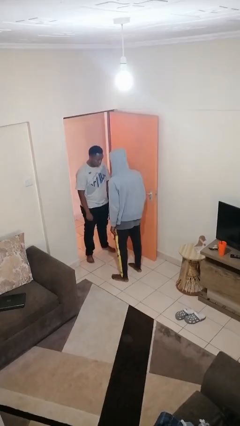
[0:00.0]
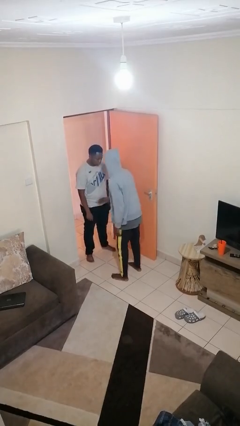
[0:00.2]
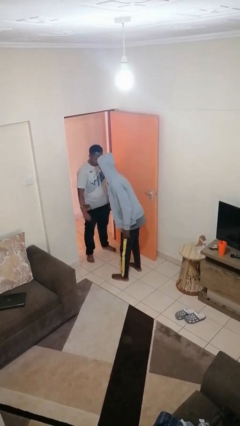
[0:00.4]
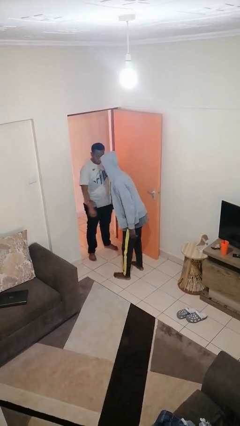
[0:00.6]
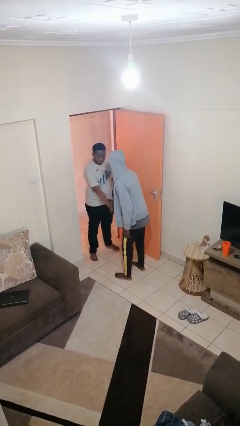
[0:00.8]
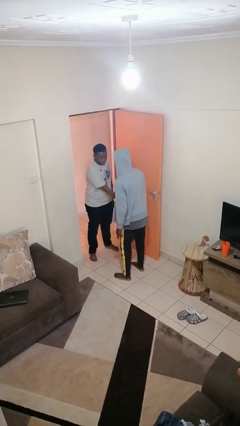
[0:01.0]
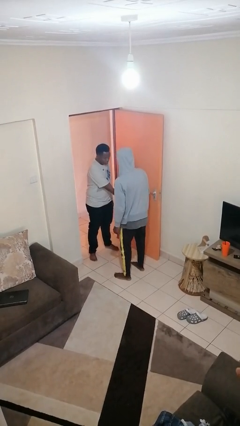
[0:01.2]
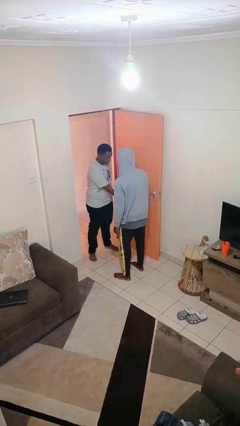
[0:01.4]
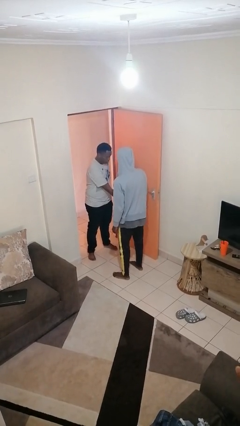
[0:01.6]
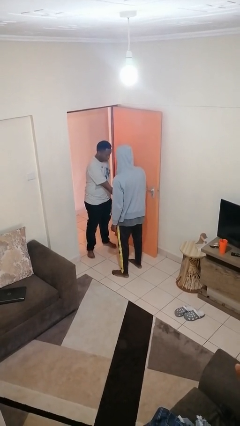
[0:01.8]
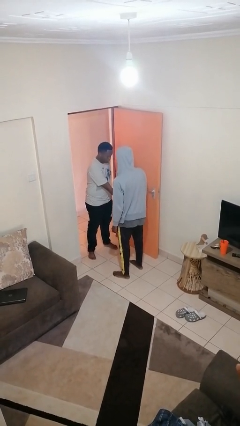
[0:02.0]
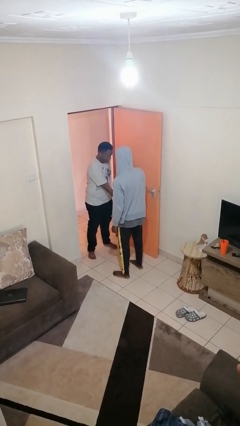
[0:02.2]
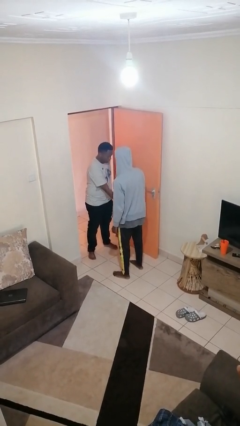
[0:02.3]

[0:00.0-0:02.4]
person grabs person by forearm

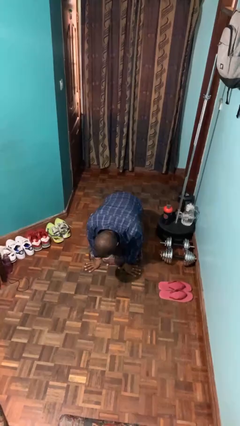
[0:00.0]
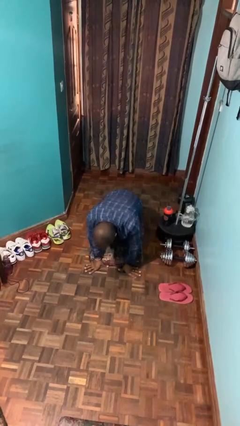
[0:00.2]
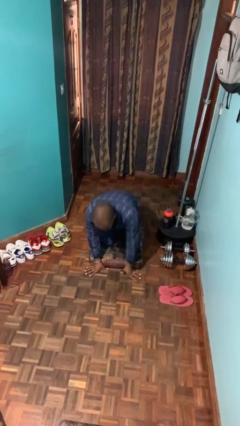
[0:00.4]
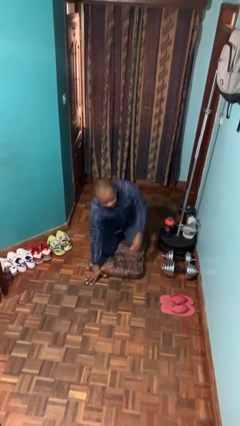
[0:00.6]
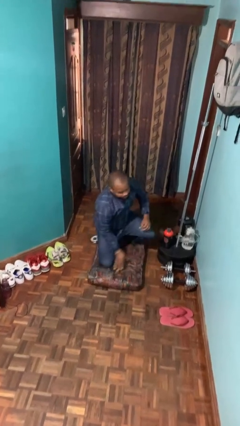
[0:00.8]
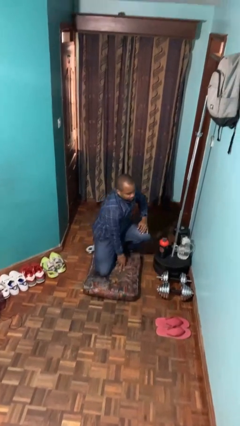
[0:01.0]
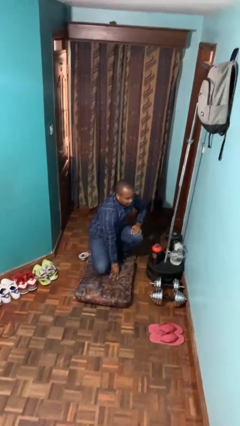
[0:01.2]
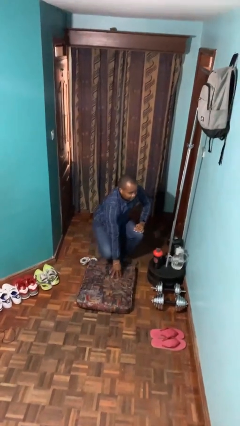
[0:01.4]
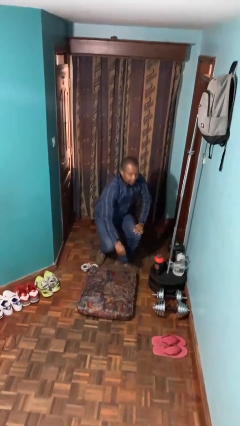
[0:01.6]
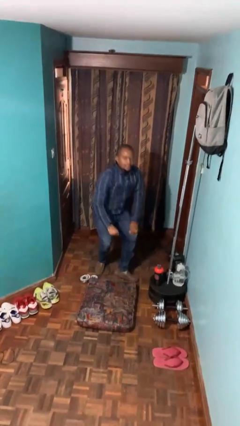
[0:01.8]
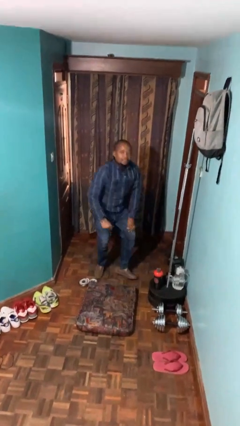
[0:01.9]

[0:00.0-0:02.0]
person stands up from floor

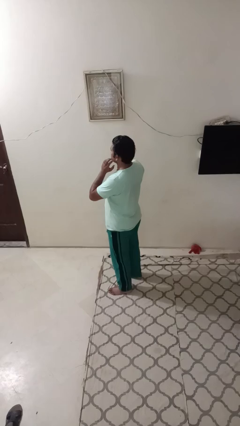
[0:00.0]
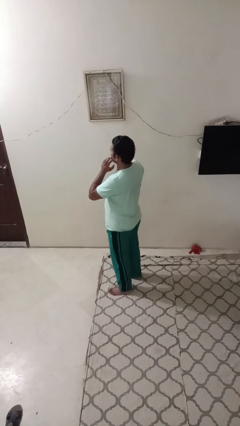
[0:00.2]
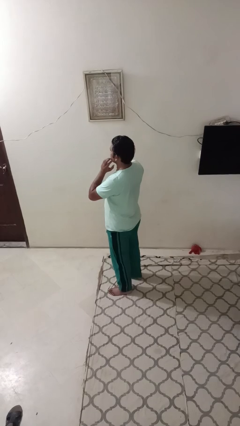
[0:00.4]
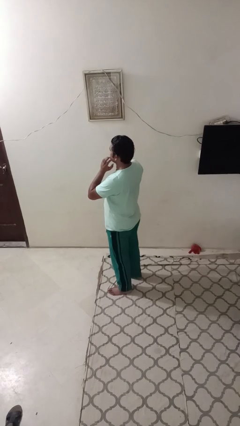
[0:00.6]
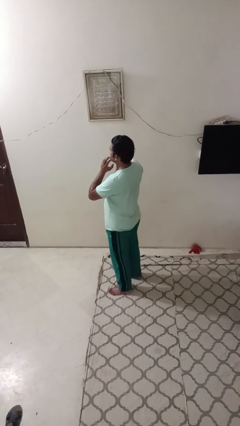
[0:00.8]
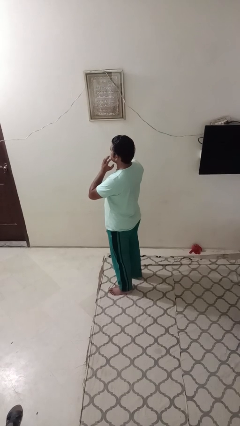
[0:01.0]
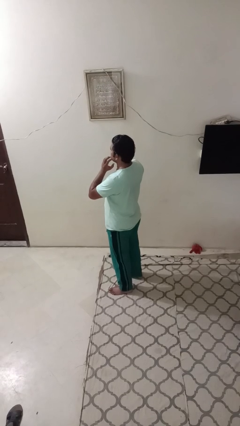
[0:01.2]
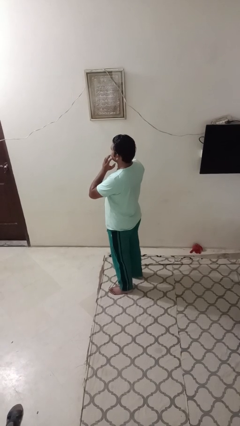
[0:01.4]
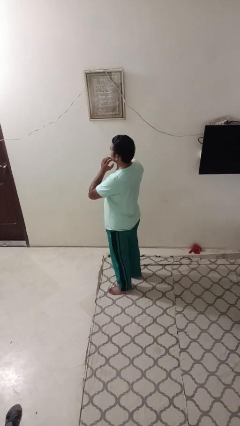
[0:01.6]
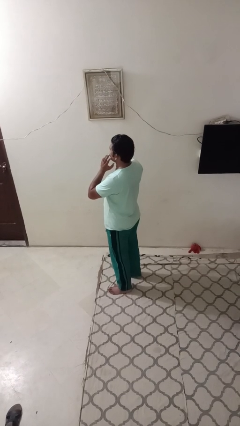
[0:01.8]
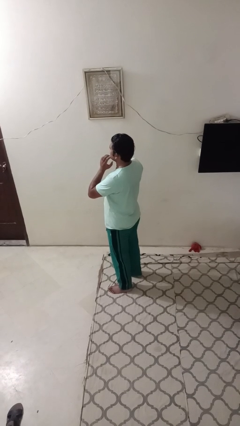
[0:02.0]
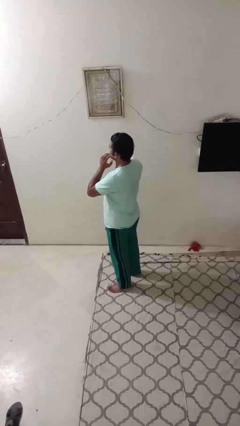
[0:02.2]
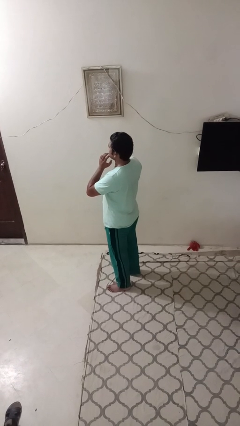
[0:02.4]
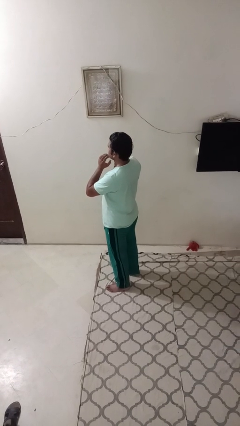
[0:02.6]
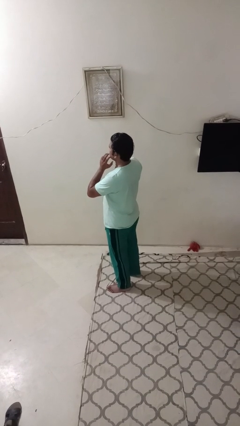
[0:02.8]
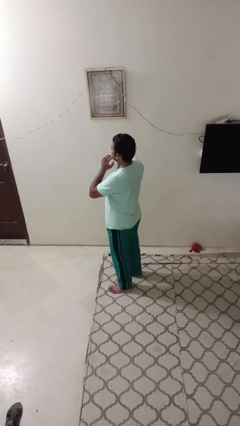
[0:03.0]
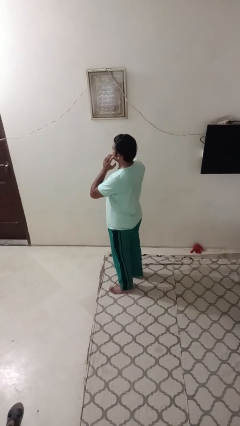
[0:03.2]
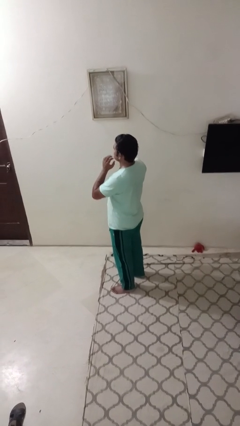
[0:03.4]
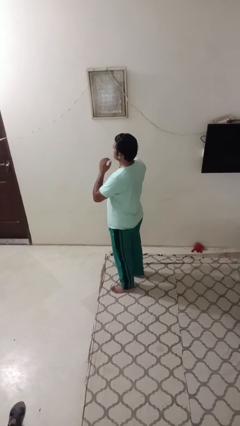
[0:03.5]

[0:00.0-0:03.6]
person scratches face

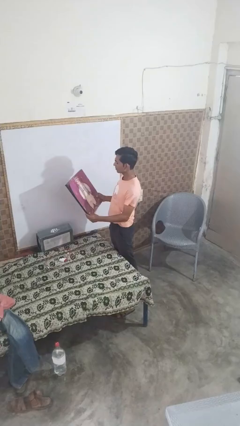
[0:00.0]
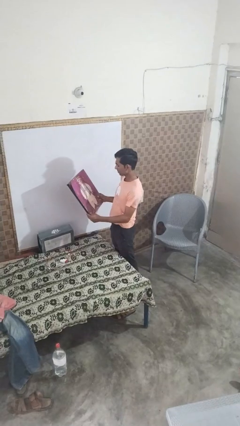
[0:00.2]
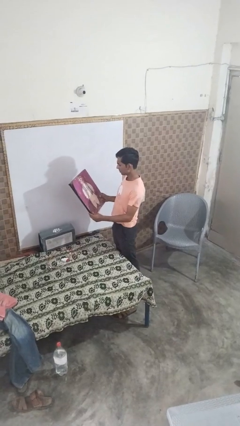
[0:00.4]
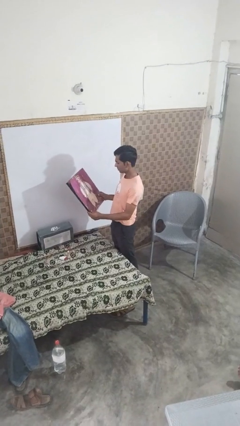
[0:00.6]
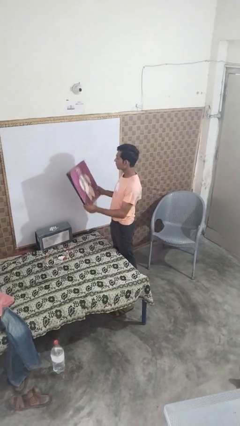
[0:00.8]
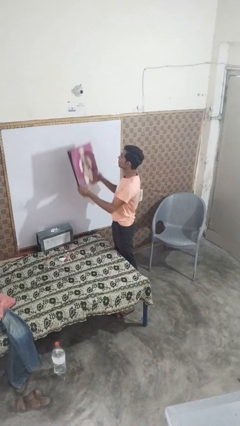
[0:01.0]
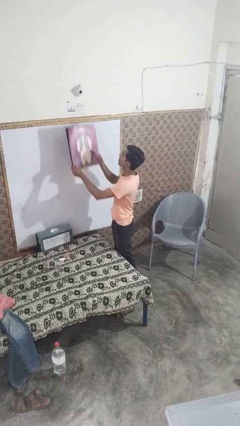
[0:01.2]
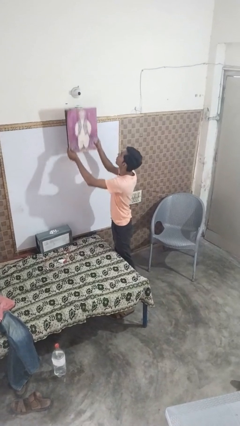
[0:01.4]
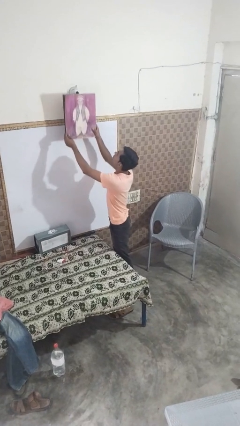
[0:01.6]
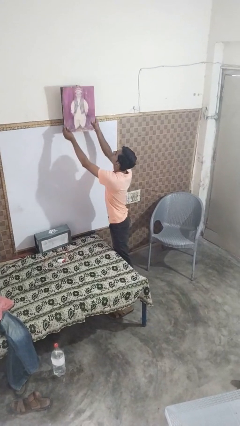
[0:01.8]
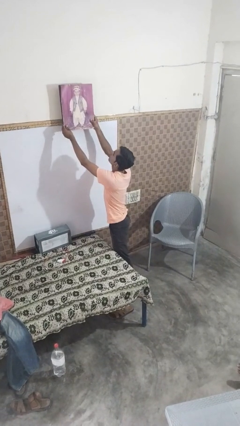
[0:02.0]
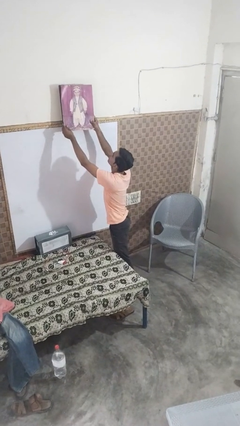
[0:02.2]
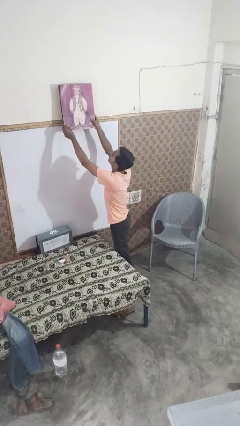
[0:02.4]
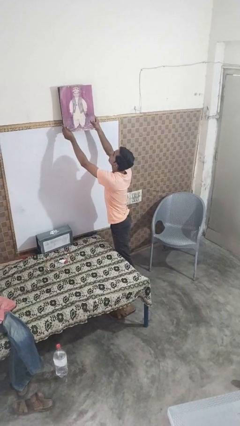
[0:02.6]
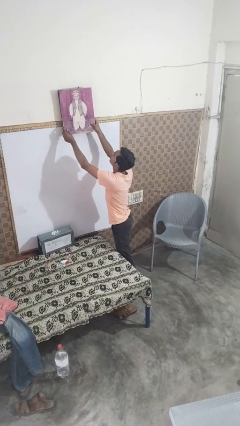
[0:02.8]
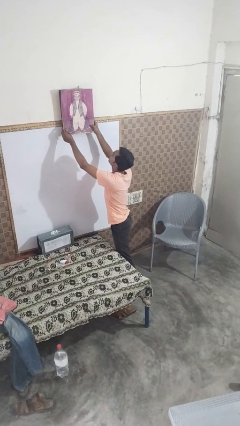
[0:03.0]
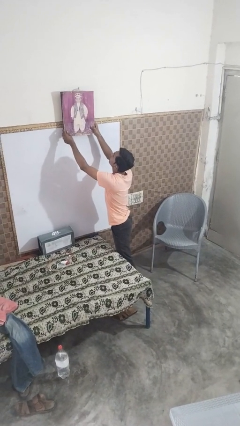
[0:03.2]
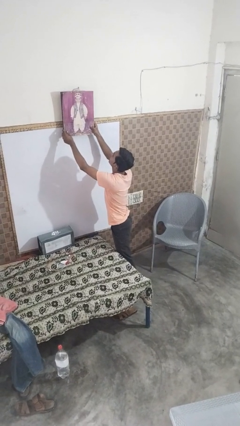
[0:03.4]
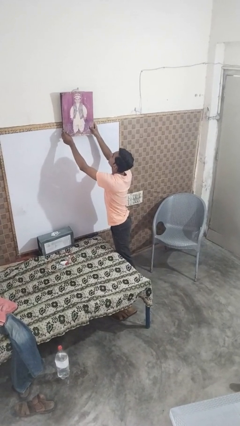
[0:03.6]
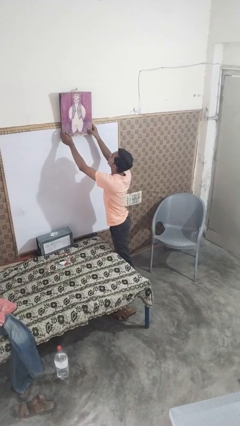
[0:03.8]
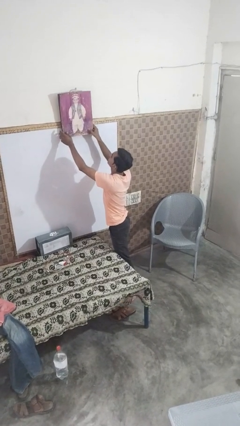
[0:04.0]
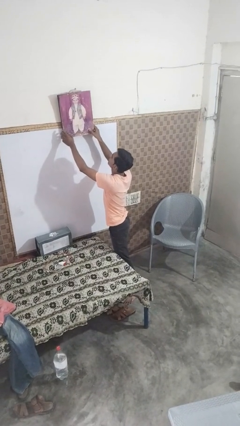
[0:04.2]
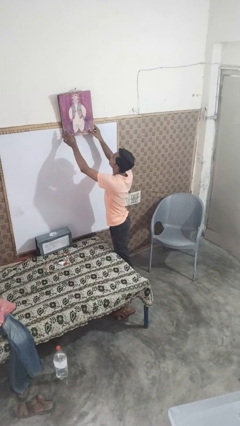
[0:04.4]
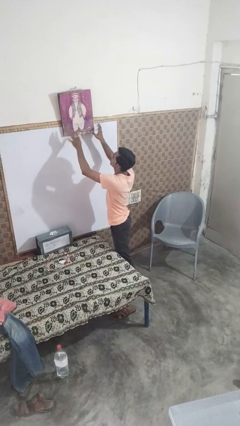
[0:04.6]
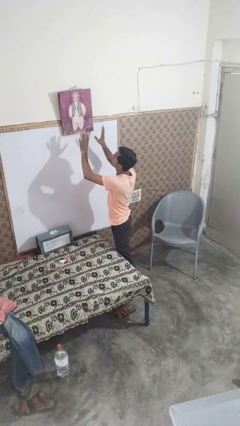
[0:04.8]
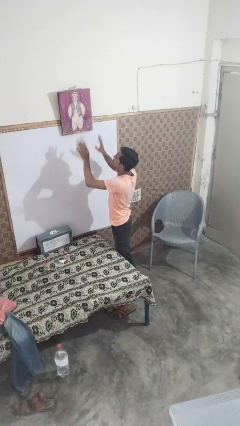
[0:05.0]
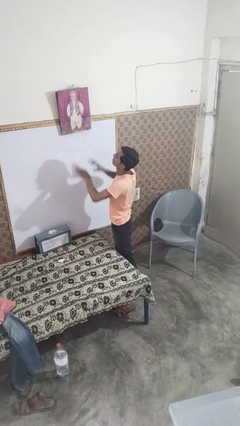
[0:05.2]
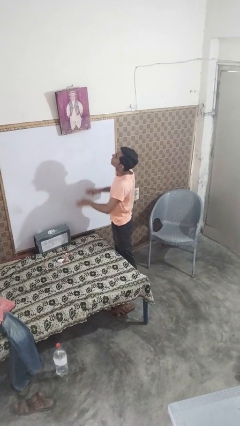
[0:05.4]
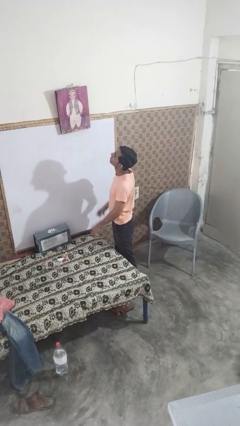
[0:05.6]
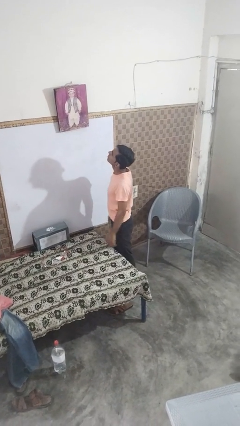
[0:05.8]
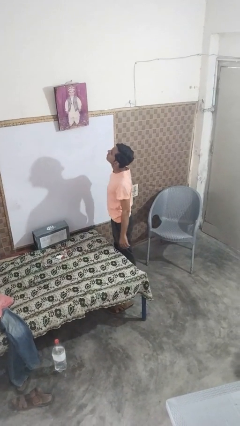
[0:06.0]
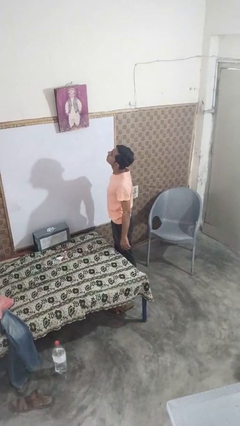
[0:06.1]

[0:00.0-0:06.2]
person puts up picture frame

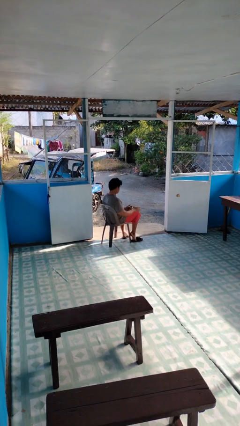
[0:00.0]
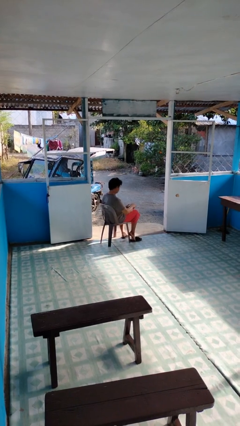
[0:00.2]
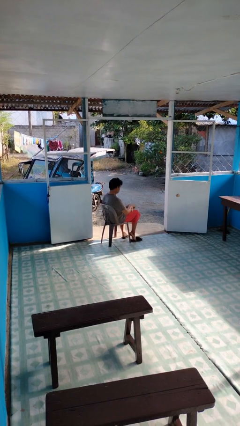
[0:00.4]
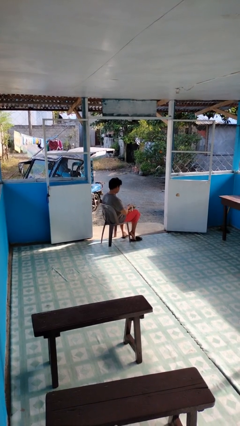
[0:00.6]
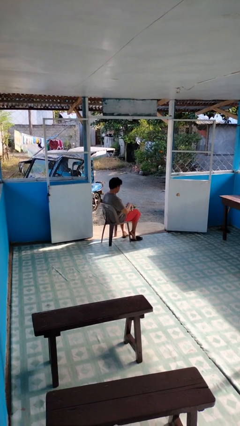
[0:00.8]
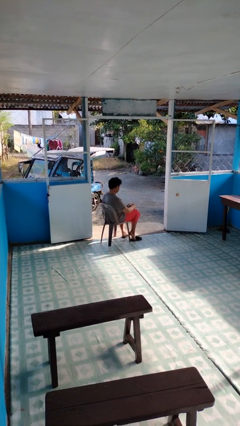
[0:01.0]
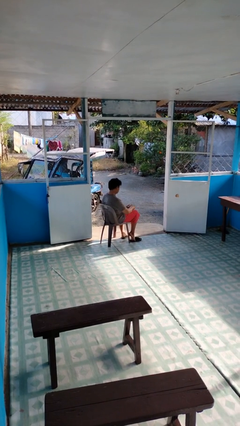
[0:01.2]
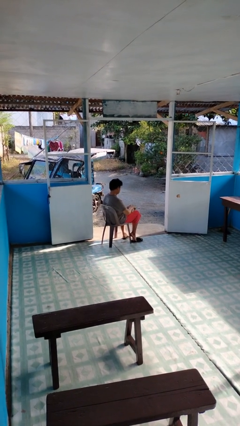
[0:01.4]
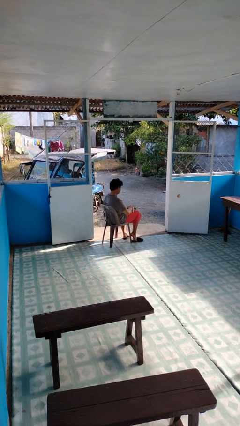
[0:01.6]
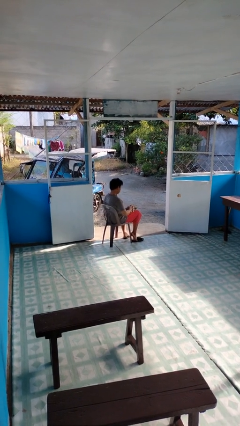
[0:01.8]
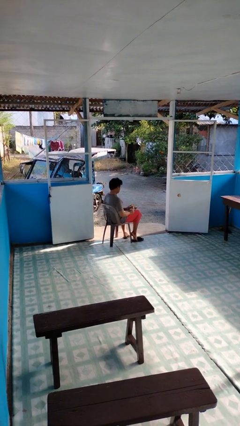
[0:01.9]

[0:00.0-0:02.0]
person pets cat

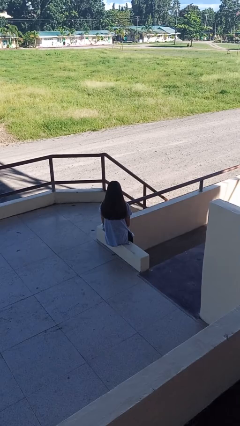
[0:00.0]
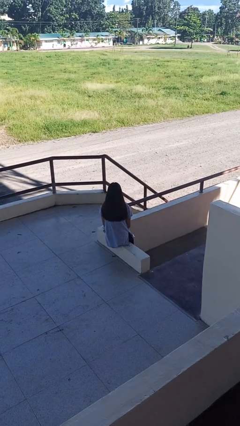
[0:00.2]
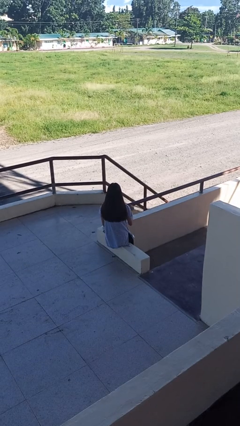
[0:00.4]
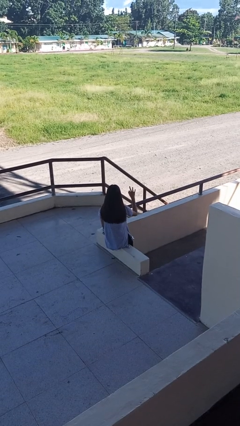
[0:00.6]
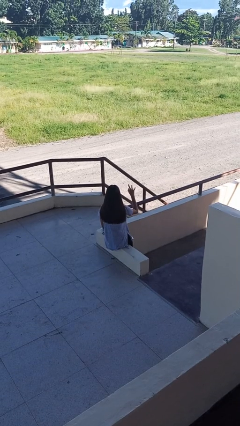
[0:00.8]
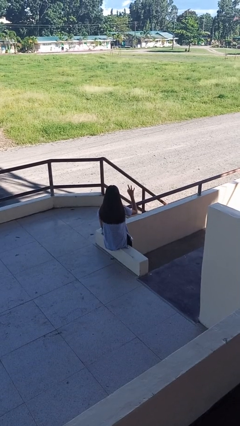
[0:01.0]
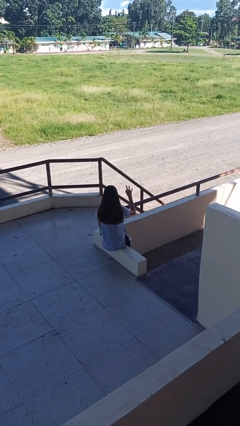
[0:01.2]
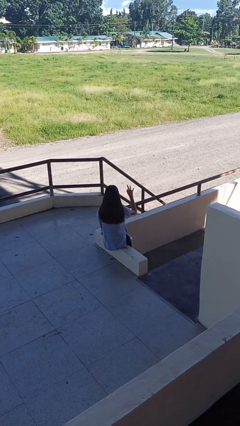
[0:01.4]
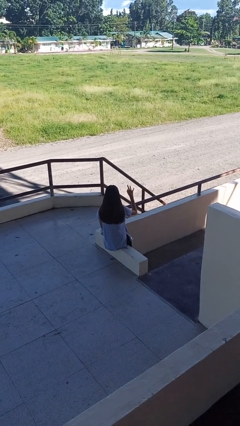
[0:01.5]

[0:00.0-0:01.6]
person gestures number three
